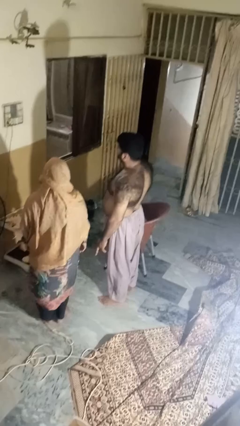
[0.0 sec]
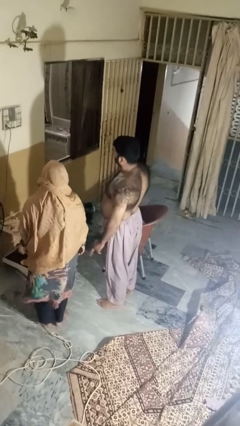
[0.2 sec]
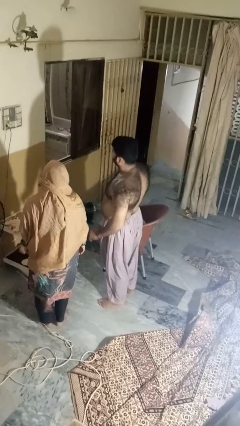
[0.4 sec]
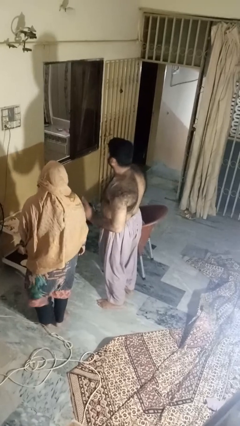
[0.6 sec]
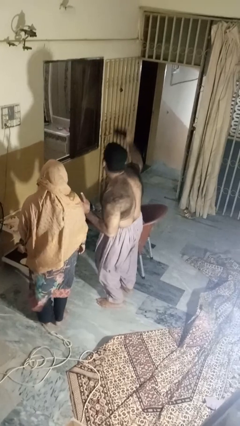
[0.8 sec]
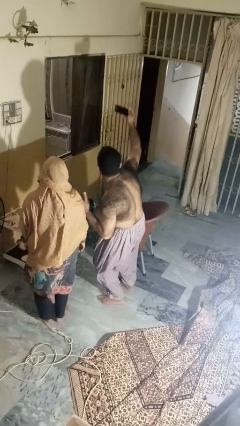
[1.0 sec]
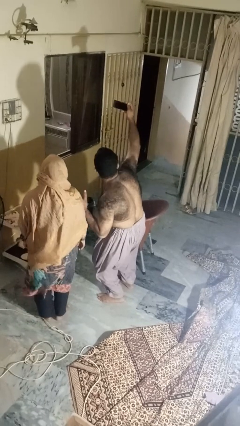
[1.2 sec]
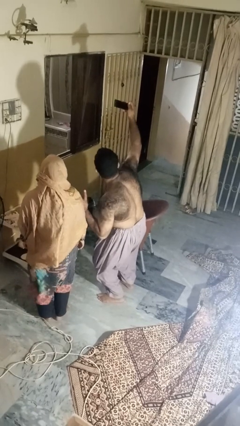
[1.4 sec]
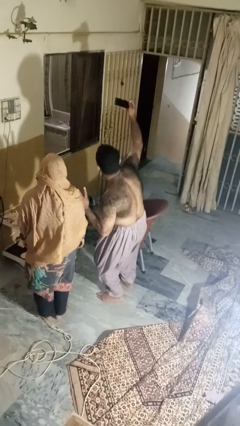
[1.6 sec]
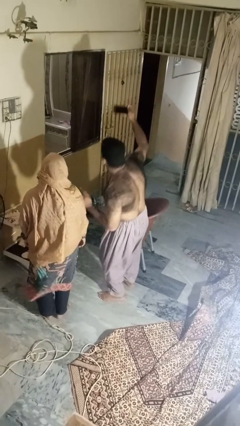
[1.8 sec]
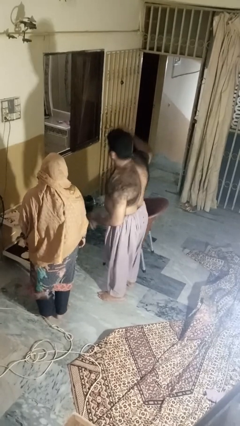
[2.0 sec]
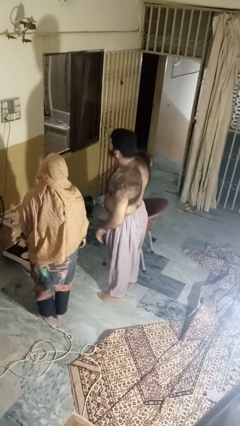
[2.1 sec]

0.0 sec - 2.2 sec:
person takes selfie with person

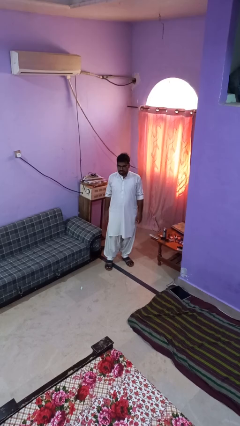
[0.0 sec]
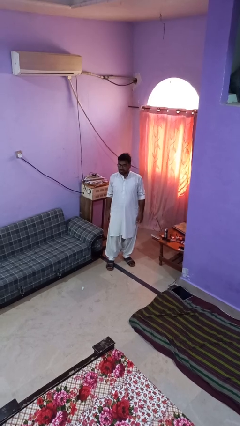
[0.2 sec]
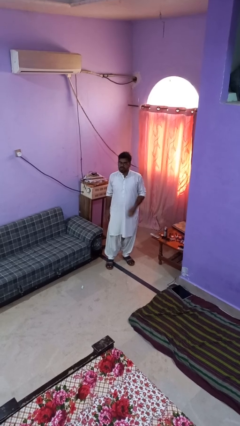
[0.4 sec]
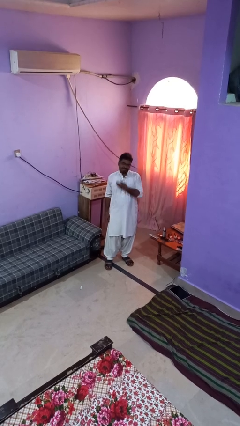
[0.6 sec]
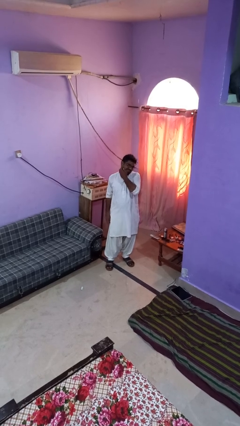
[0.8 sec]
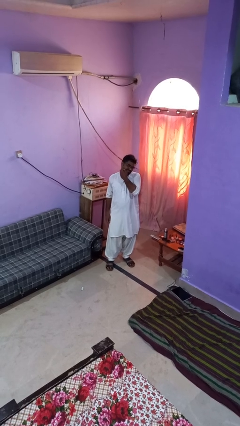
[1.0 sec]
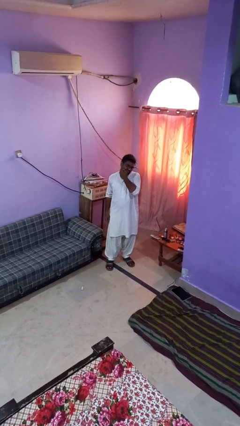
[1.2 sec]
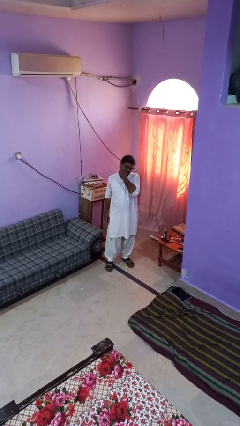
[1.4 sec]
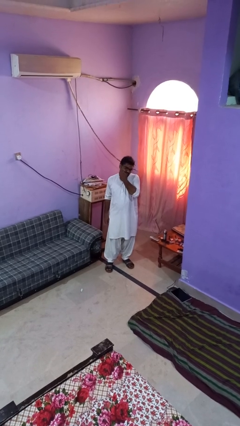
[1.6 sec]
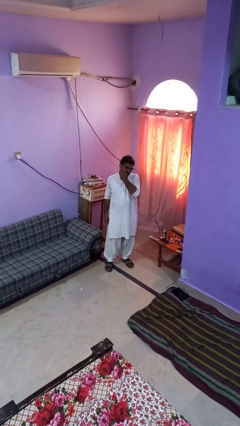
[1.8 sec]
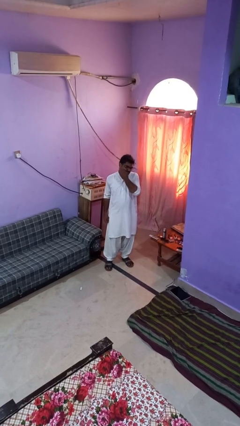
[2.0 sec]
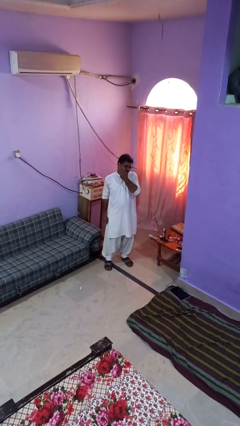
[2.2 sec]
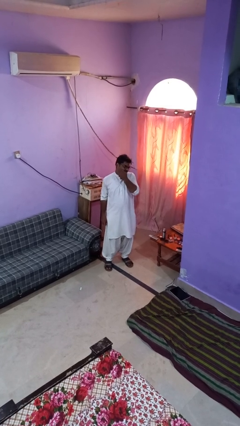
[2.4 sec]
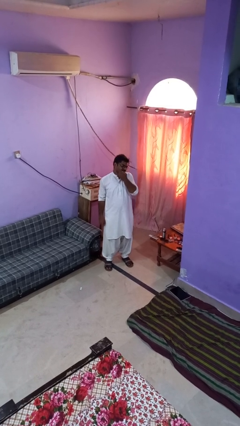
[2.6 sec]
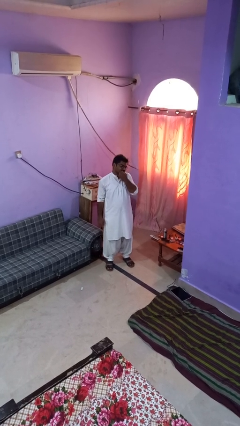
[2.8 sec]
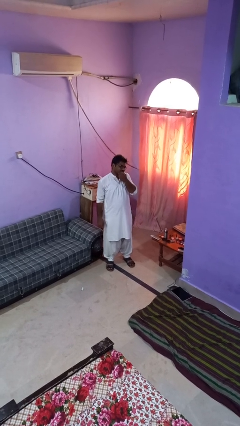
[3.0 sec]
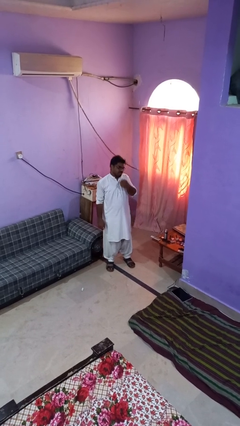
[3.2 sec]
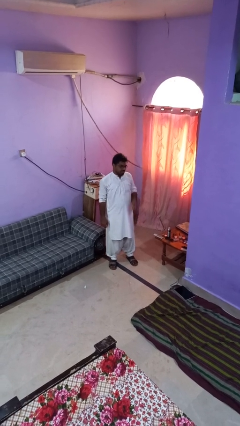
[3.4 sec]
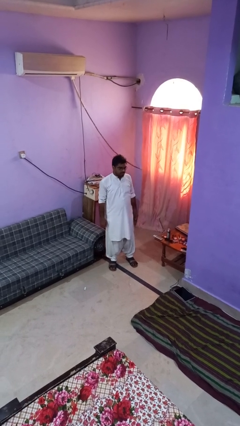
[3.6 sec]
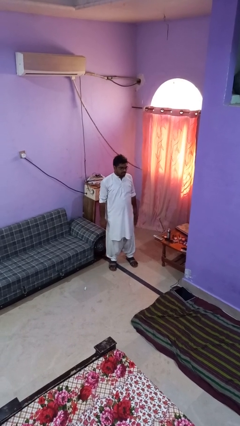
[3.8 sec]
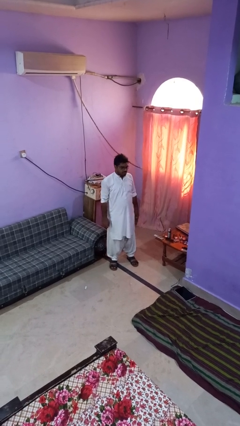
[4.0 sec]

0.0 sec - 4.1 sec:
person scratches face

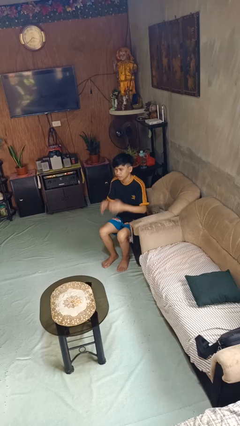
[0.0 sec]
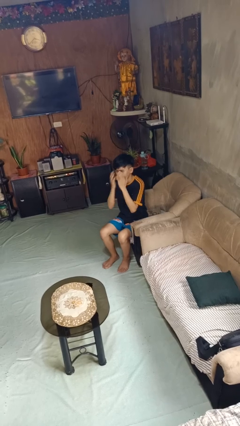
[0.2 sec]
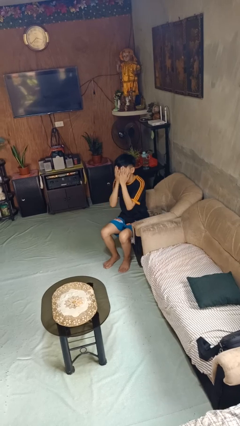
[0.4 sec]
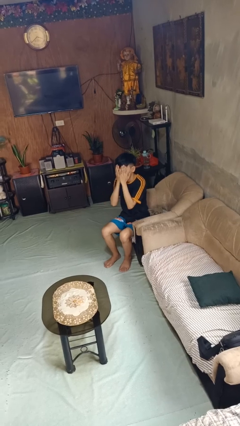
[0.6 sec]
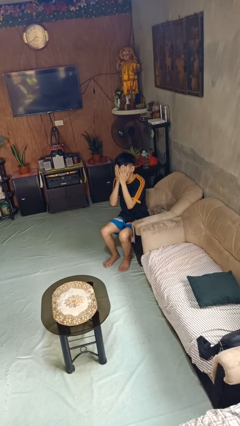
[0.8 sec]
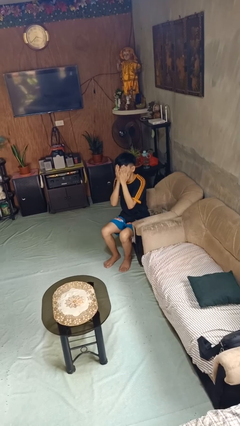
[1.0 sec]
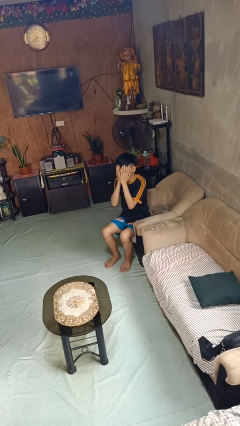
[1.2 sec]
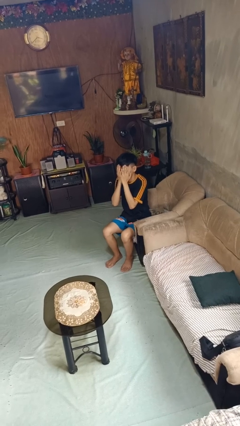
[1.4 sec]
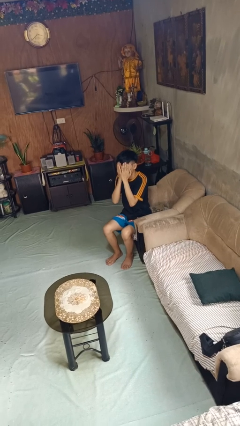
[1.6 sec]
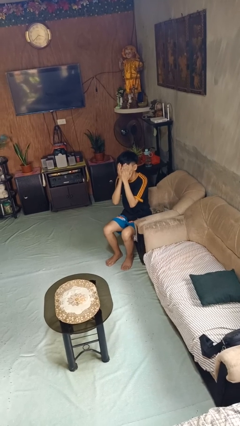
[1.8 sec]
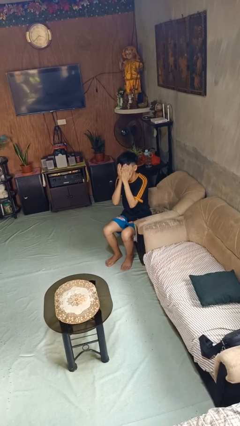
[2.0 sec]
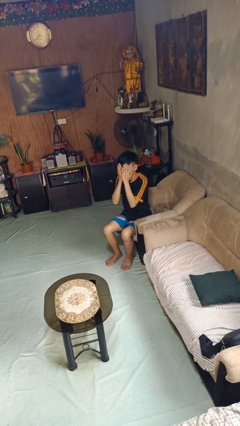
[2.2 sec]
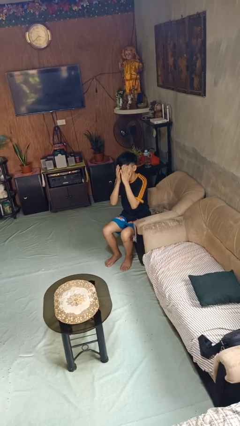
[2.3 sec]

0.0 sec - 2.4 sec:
person covers face with hands

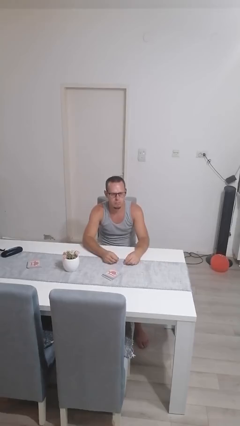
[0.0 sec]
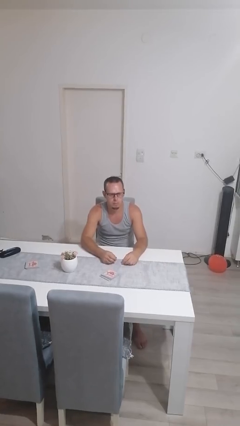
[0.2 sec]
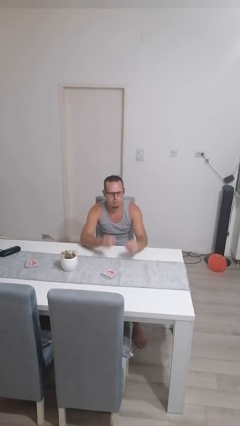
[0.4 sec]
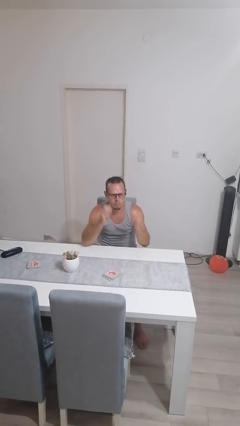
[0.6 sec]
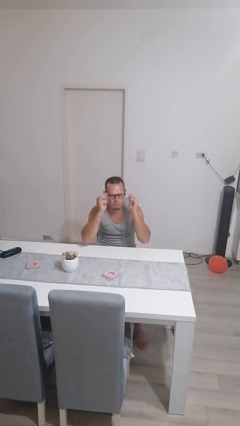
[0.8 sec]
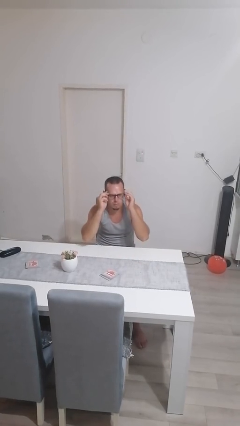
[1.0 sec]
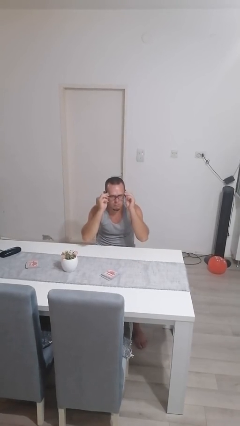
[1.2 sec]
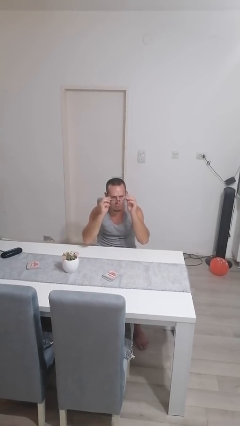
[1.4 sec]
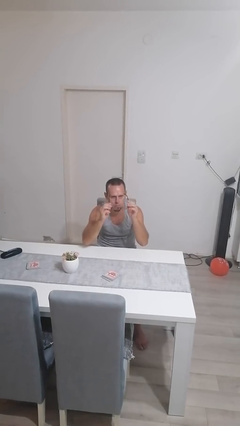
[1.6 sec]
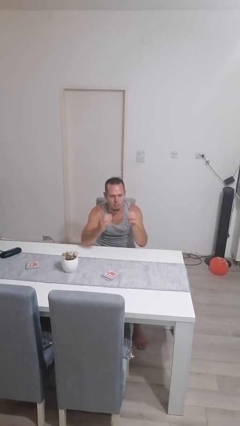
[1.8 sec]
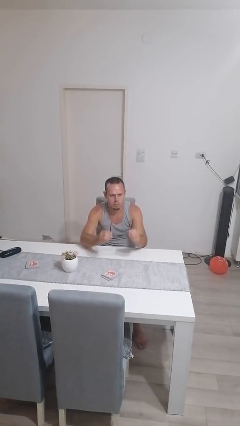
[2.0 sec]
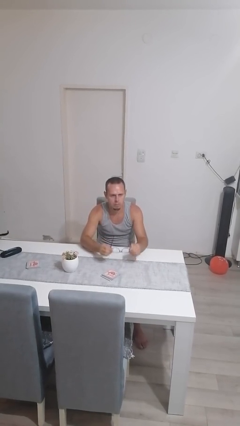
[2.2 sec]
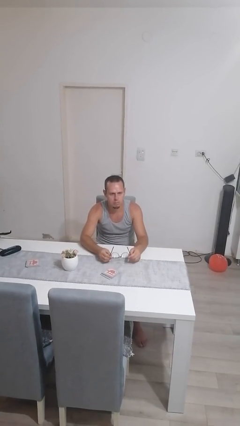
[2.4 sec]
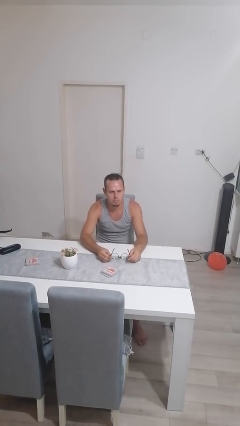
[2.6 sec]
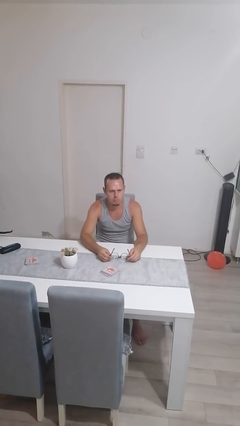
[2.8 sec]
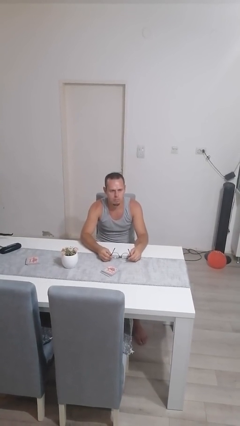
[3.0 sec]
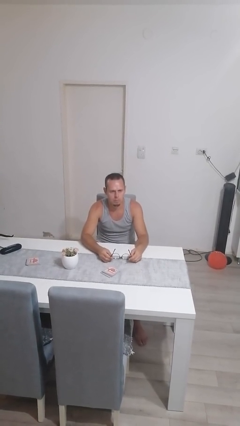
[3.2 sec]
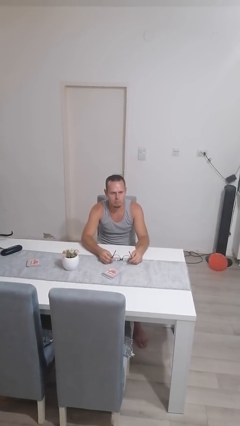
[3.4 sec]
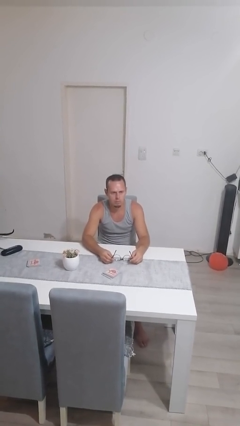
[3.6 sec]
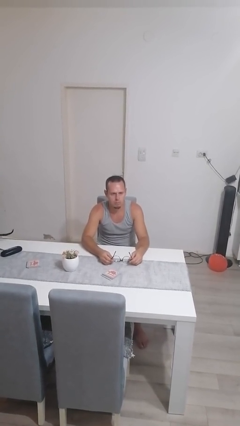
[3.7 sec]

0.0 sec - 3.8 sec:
person takes off glasses

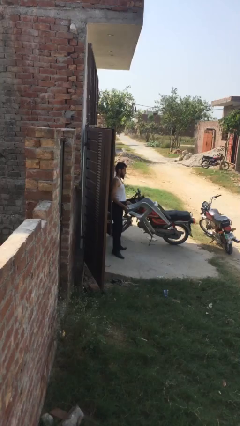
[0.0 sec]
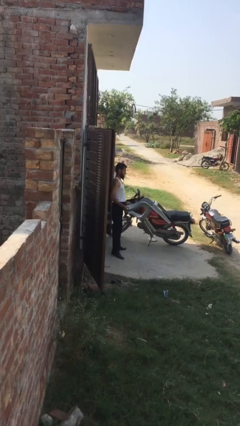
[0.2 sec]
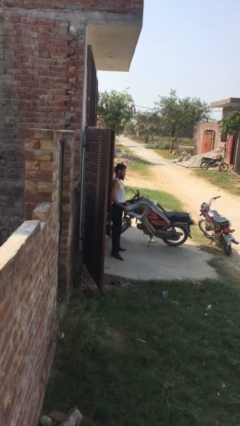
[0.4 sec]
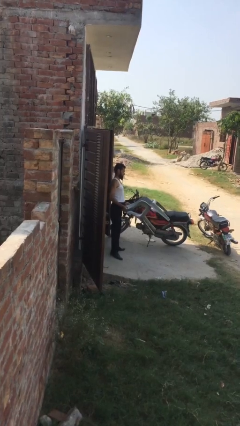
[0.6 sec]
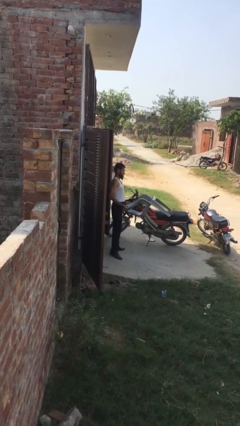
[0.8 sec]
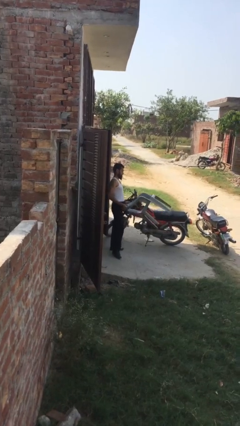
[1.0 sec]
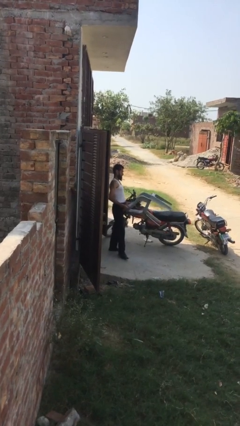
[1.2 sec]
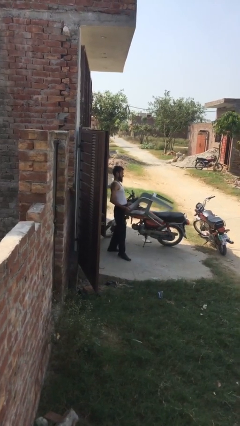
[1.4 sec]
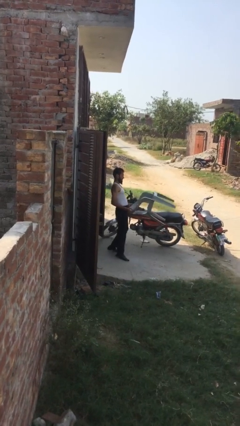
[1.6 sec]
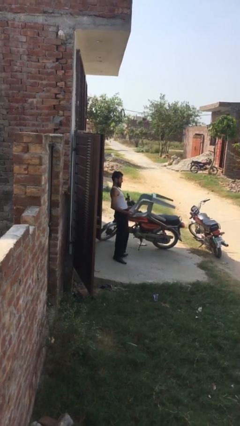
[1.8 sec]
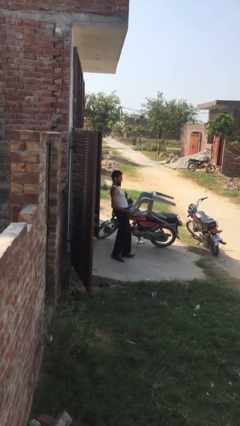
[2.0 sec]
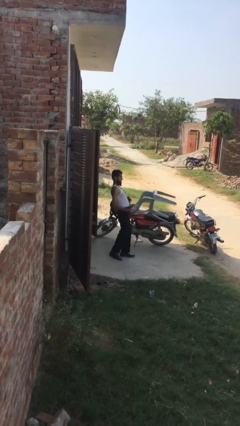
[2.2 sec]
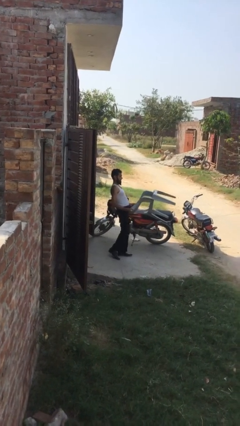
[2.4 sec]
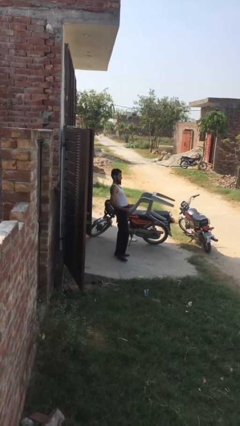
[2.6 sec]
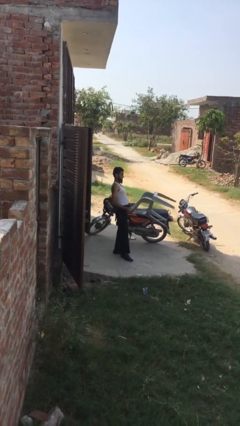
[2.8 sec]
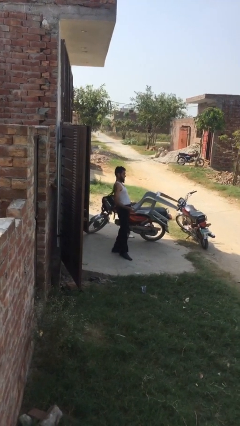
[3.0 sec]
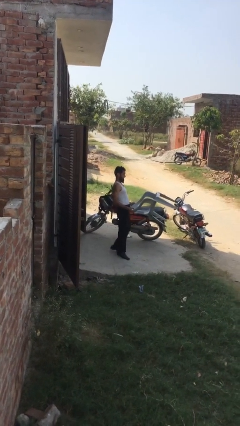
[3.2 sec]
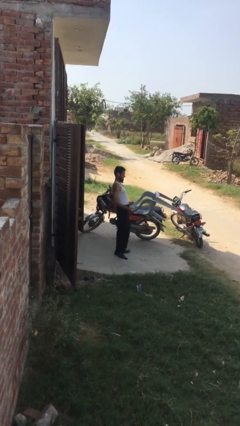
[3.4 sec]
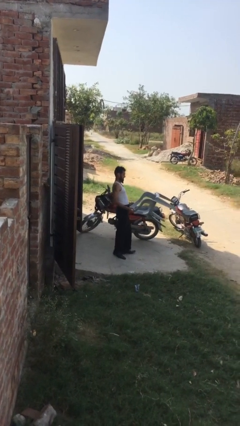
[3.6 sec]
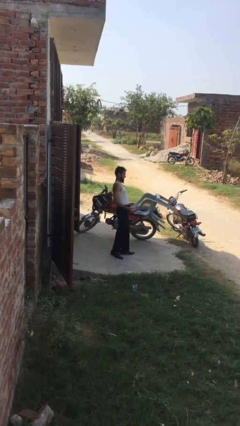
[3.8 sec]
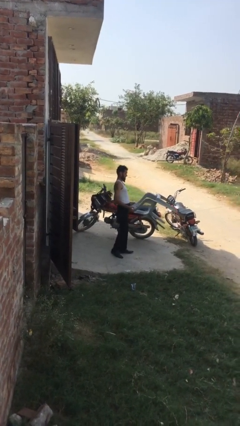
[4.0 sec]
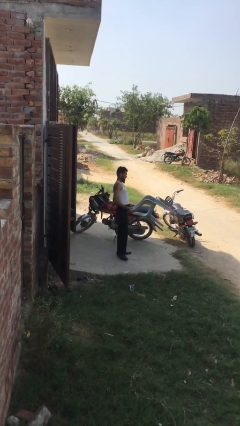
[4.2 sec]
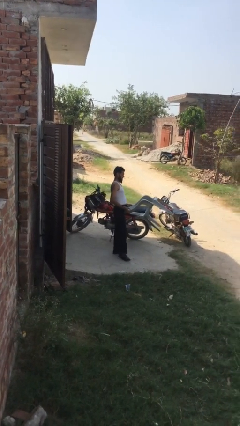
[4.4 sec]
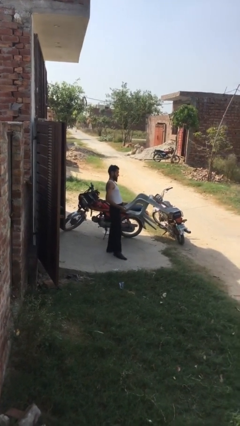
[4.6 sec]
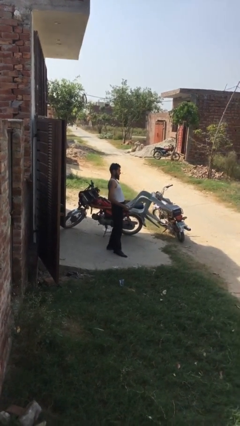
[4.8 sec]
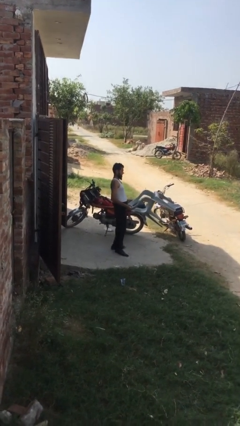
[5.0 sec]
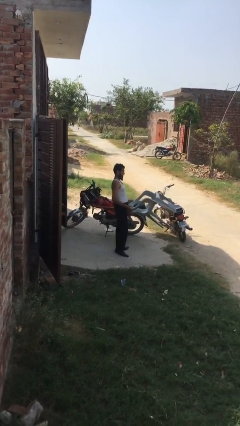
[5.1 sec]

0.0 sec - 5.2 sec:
person carries heavy object
